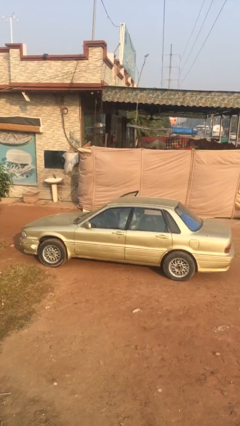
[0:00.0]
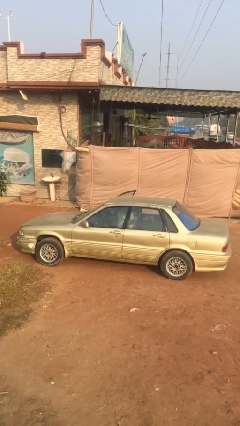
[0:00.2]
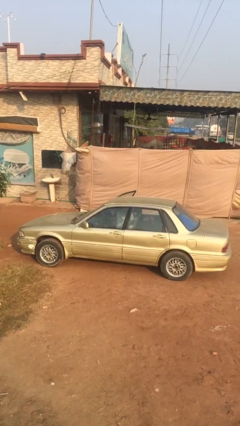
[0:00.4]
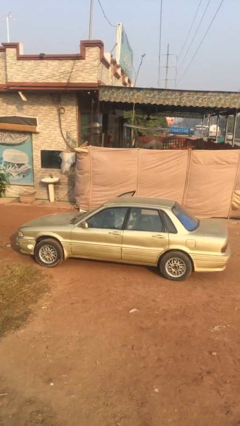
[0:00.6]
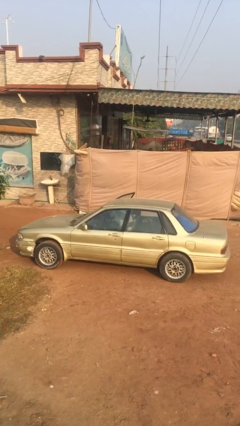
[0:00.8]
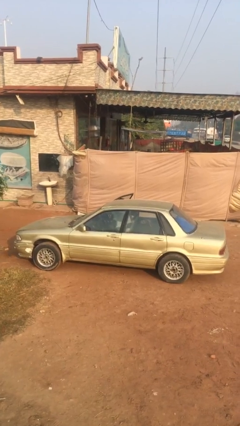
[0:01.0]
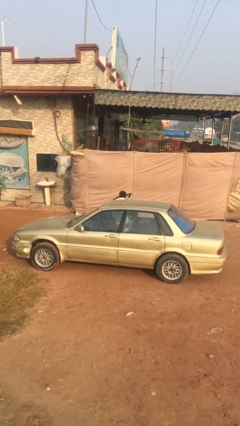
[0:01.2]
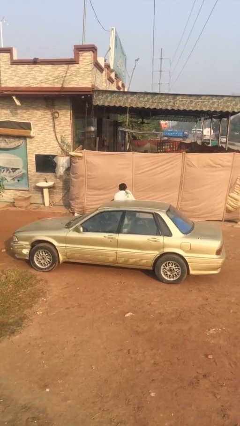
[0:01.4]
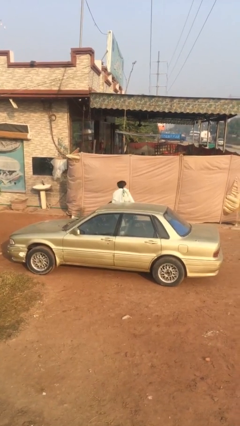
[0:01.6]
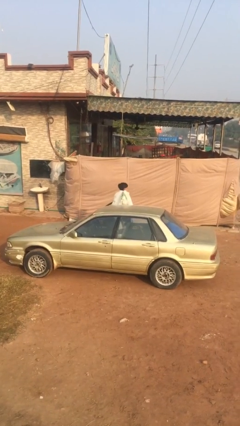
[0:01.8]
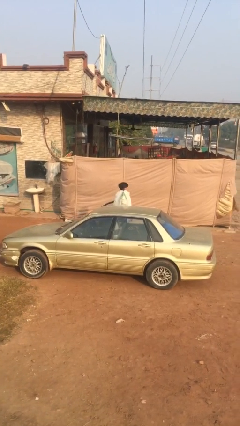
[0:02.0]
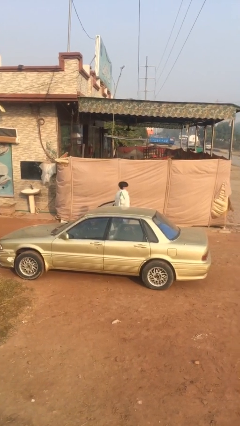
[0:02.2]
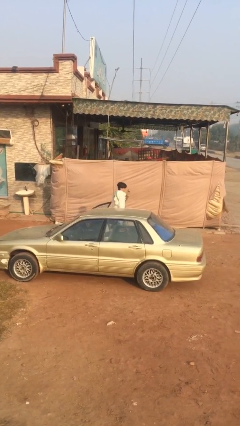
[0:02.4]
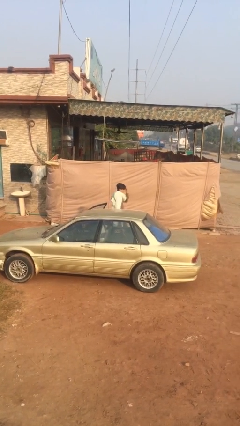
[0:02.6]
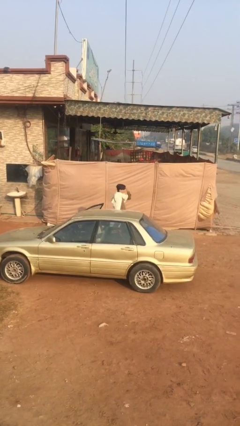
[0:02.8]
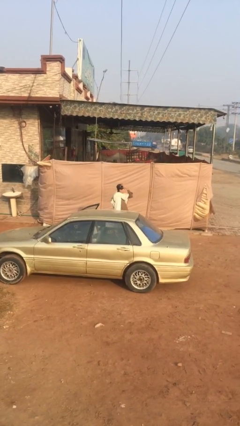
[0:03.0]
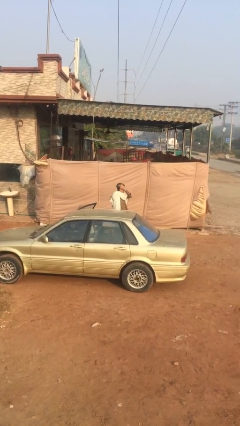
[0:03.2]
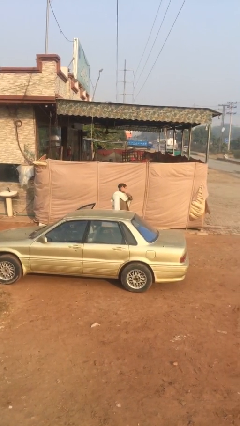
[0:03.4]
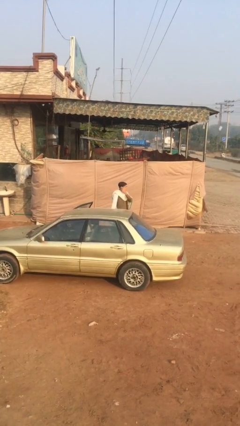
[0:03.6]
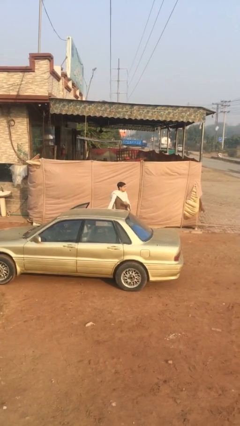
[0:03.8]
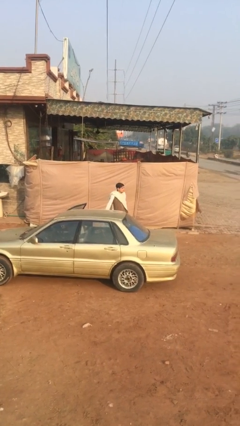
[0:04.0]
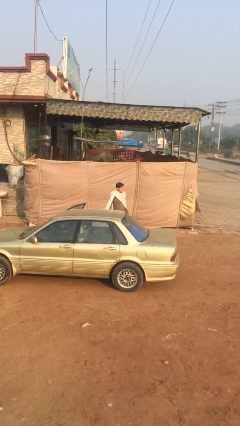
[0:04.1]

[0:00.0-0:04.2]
person exits car

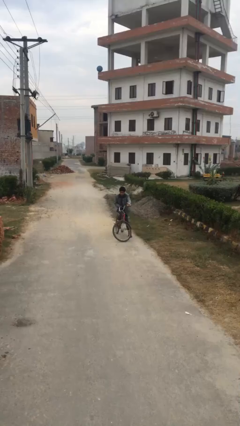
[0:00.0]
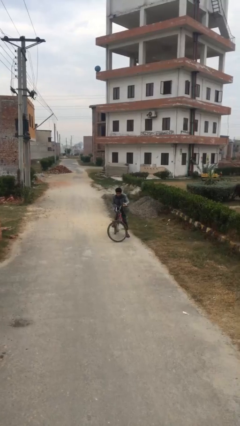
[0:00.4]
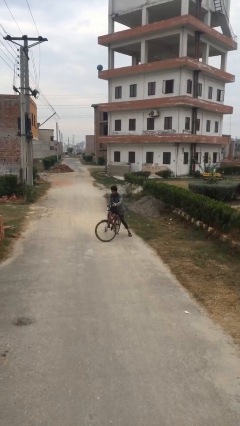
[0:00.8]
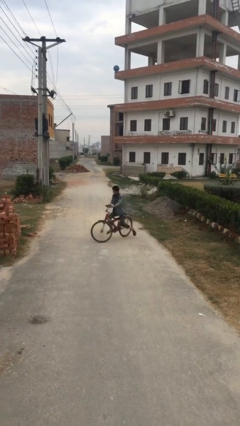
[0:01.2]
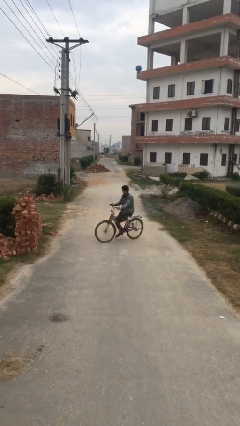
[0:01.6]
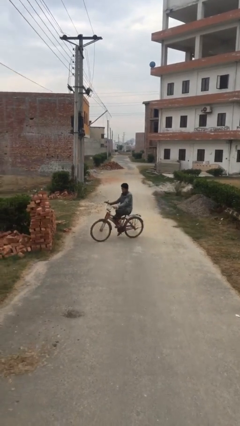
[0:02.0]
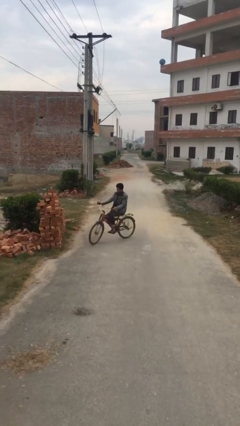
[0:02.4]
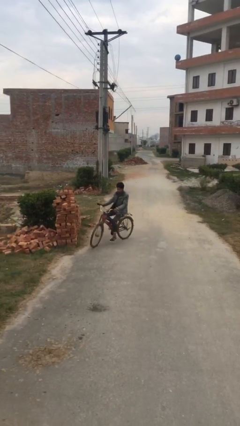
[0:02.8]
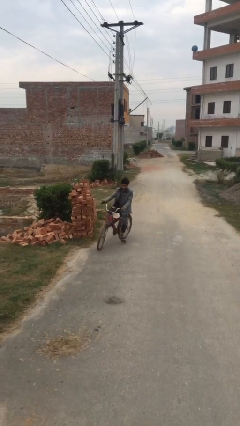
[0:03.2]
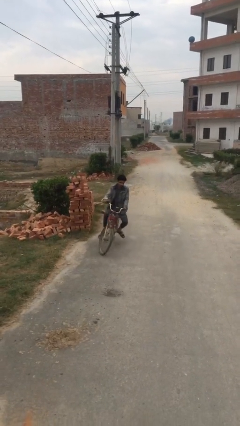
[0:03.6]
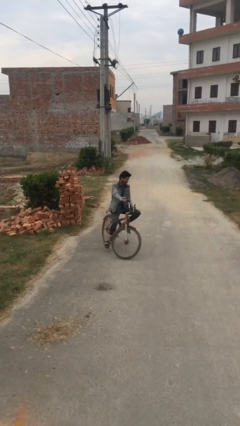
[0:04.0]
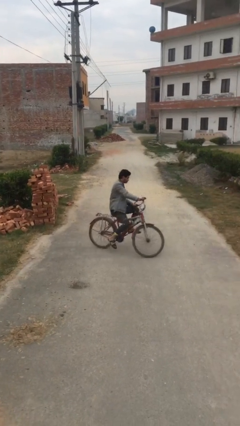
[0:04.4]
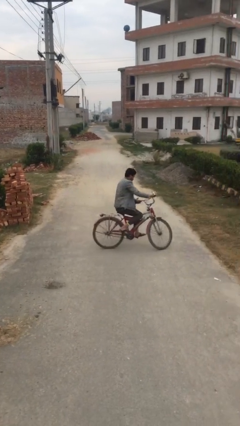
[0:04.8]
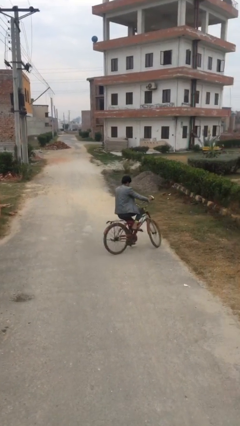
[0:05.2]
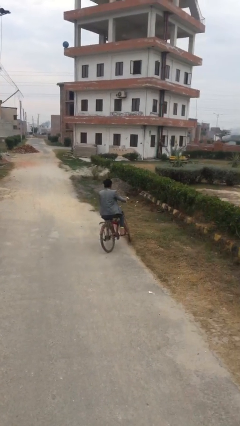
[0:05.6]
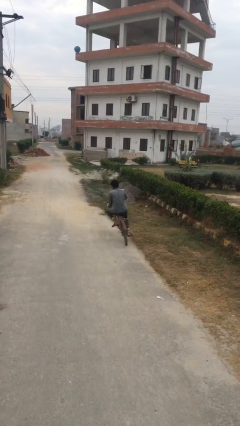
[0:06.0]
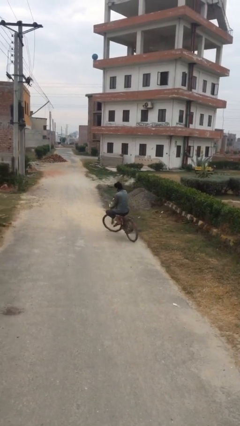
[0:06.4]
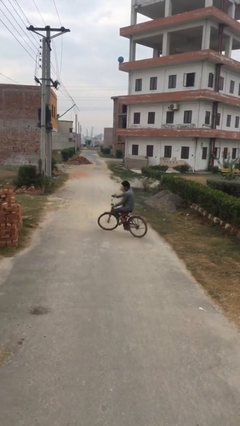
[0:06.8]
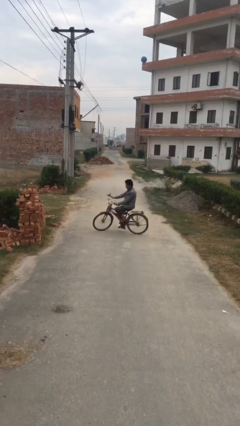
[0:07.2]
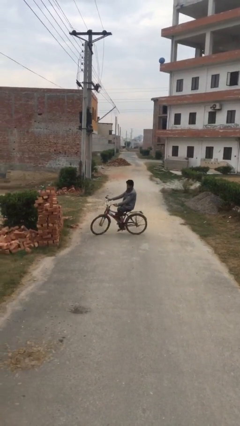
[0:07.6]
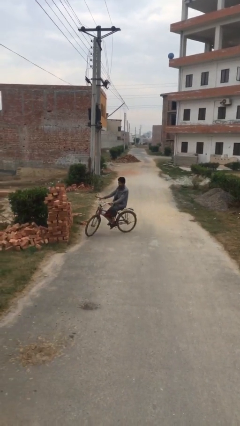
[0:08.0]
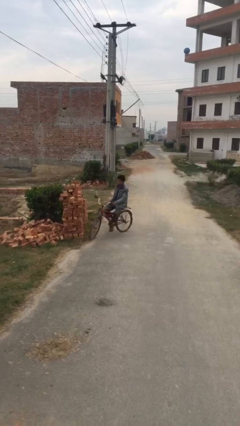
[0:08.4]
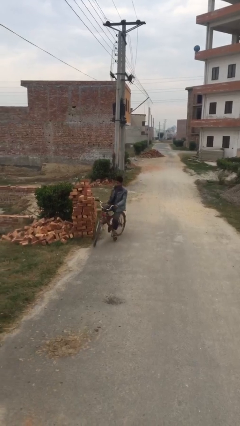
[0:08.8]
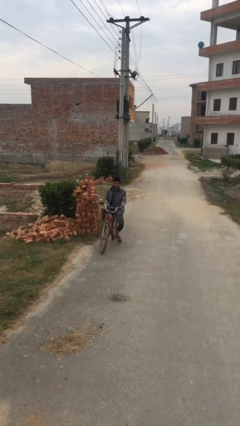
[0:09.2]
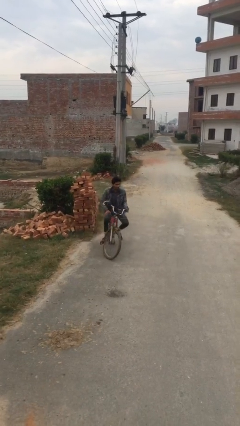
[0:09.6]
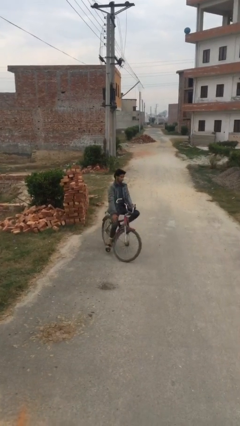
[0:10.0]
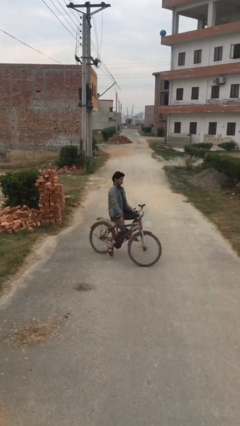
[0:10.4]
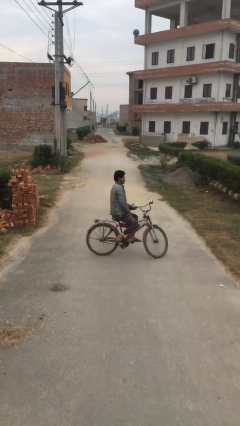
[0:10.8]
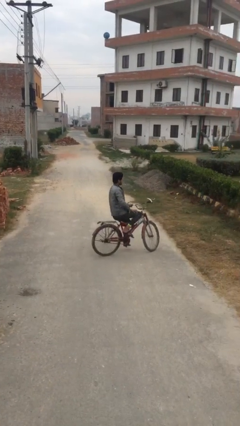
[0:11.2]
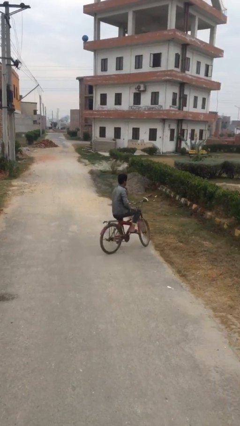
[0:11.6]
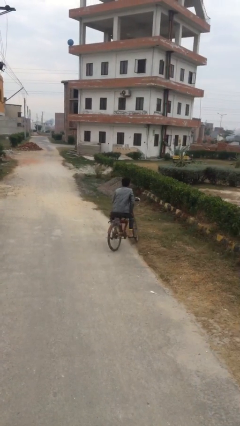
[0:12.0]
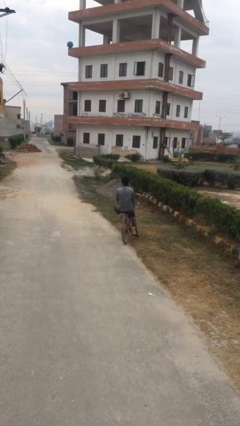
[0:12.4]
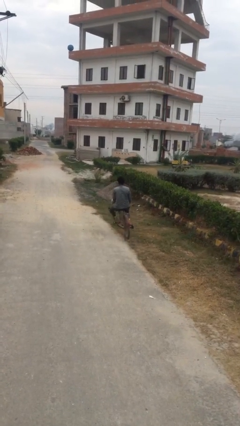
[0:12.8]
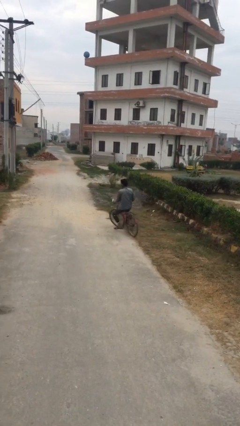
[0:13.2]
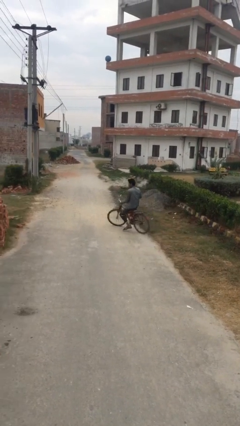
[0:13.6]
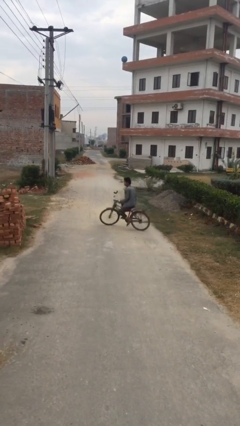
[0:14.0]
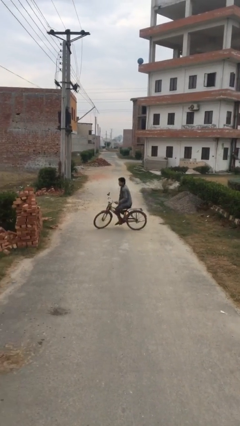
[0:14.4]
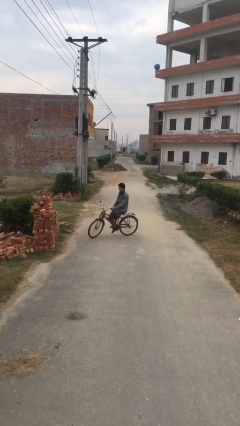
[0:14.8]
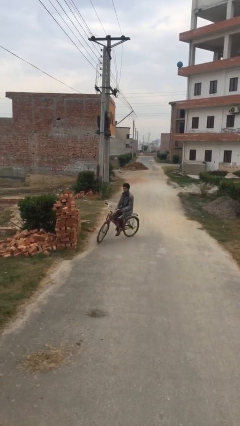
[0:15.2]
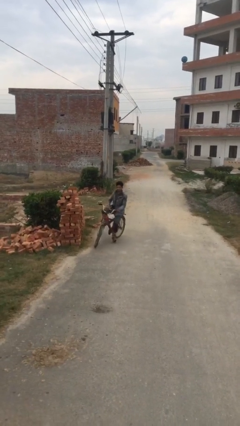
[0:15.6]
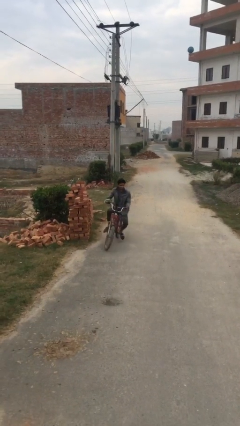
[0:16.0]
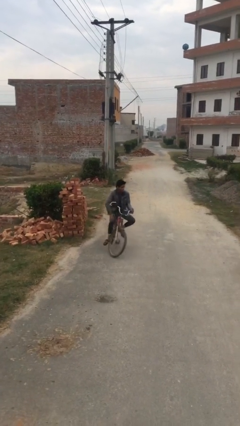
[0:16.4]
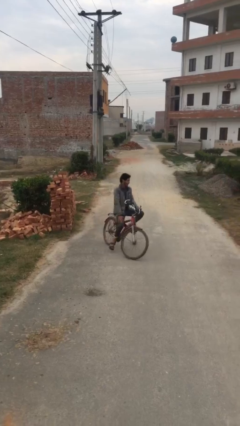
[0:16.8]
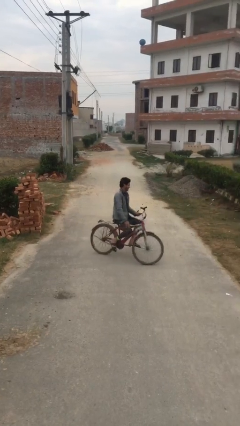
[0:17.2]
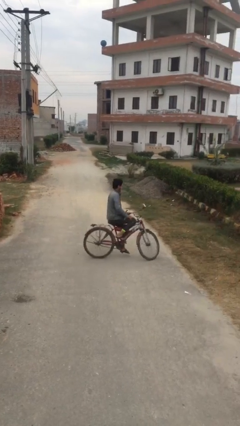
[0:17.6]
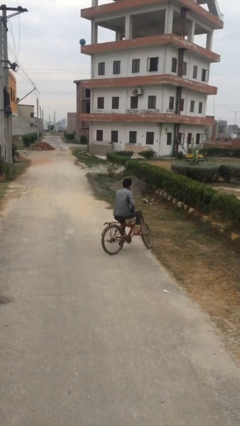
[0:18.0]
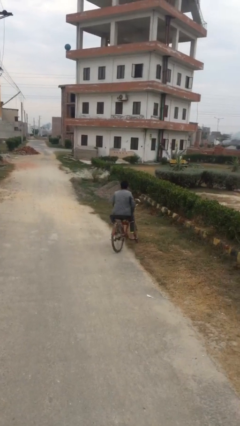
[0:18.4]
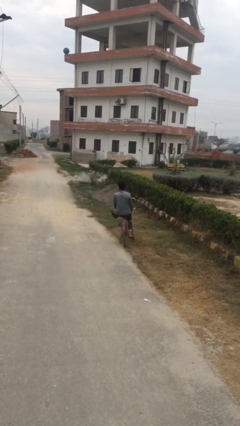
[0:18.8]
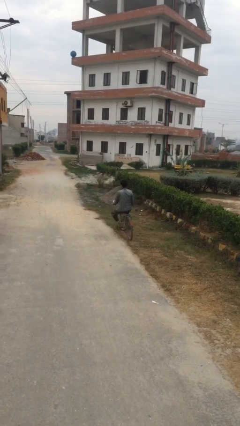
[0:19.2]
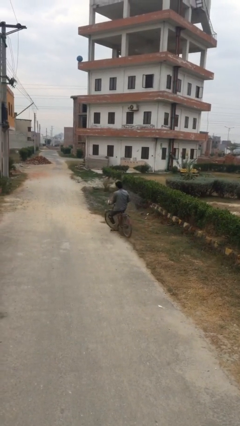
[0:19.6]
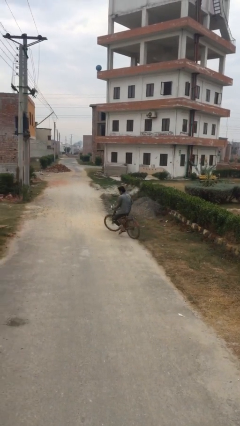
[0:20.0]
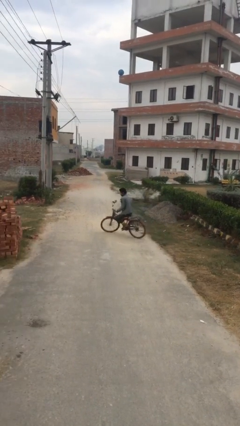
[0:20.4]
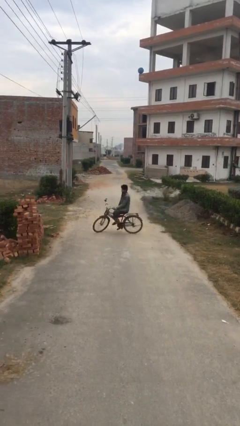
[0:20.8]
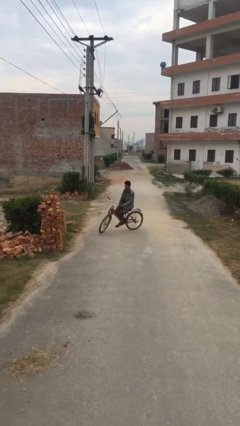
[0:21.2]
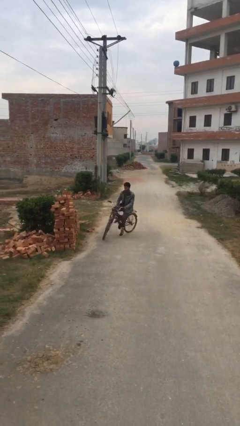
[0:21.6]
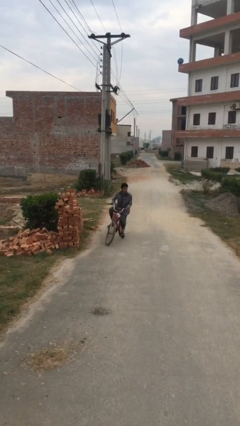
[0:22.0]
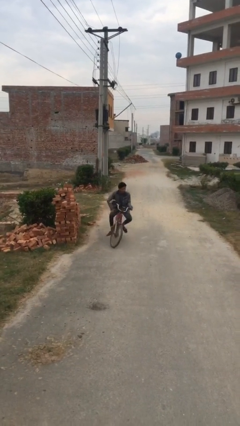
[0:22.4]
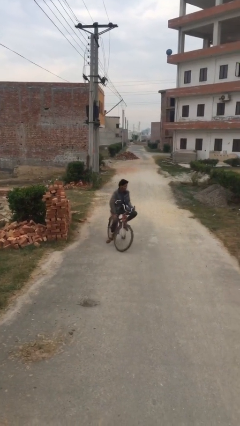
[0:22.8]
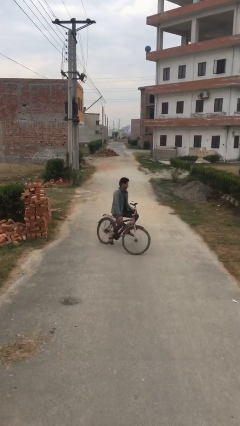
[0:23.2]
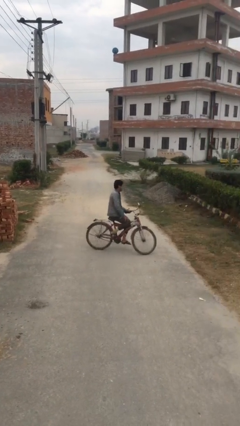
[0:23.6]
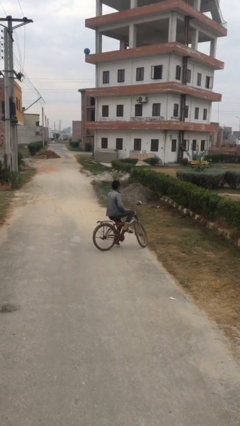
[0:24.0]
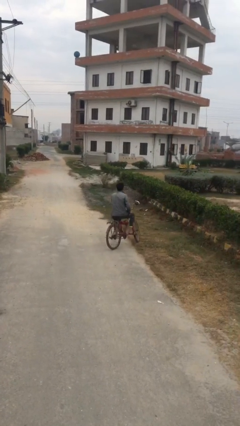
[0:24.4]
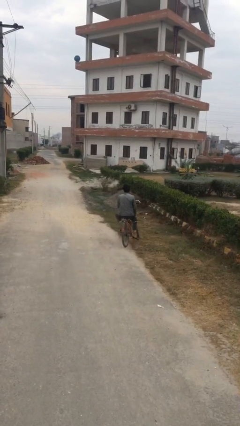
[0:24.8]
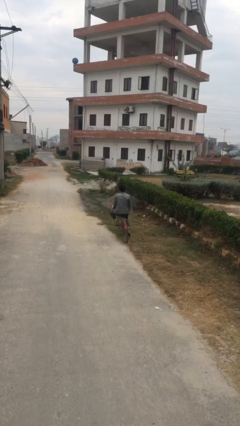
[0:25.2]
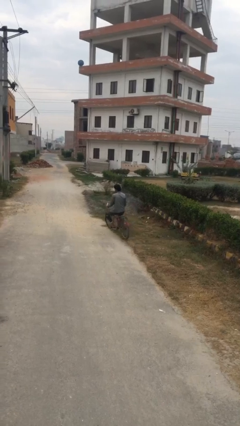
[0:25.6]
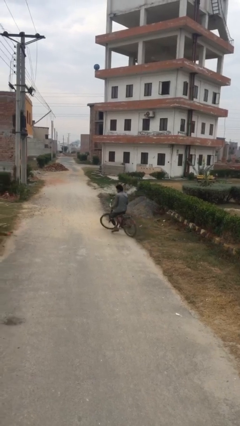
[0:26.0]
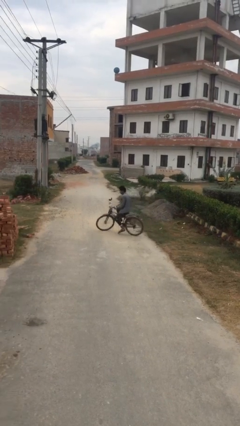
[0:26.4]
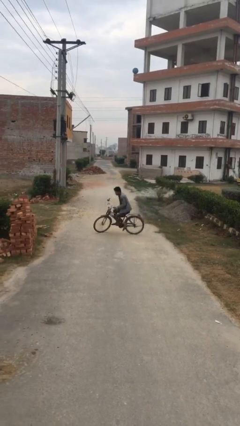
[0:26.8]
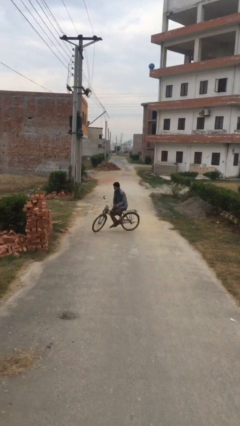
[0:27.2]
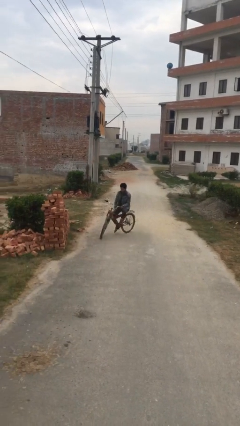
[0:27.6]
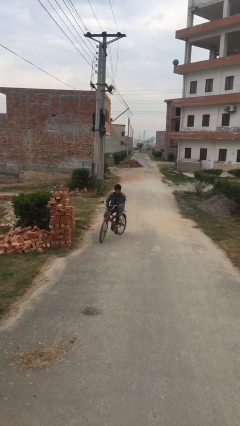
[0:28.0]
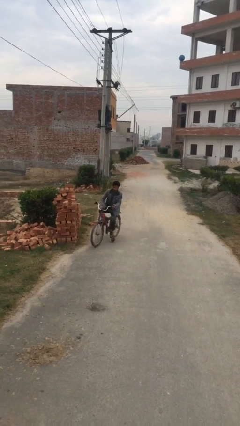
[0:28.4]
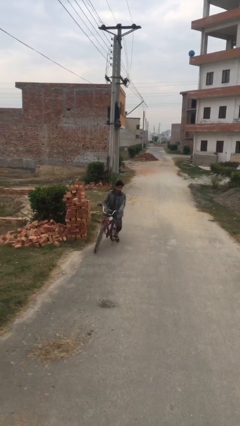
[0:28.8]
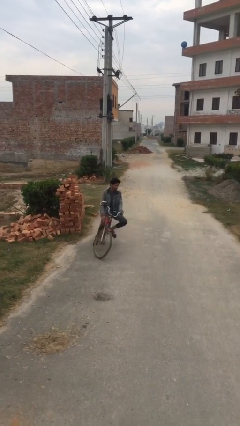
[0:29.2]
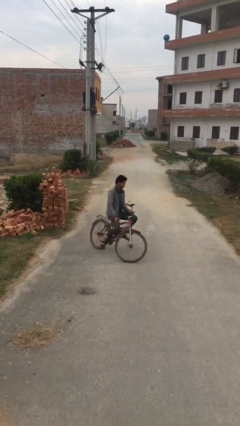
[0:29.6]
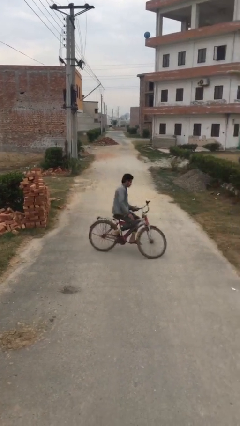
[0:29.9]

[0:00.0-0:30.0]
person rides bicycle
